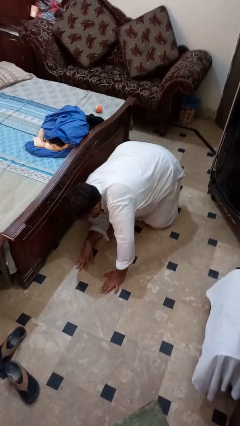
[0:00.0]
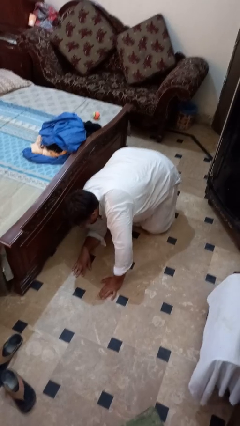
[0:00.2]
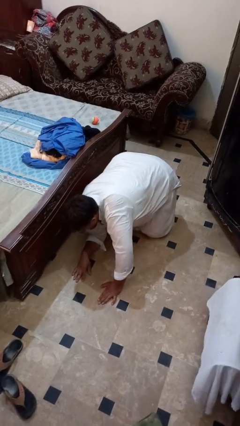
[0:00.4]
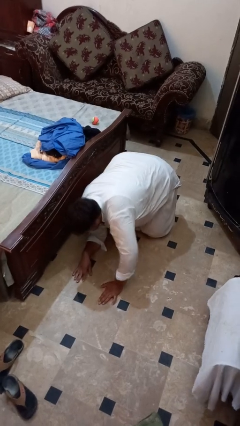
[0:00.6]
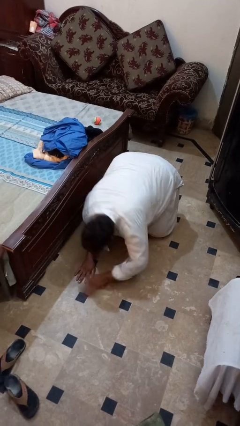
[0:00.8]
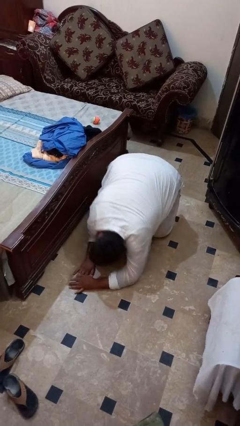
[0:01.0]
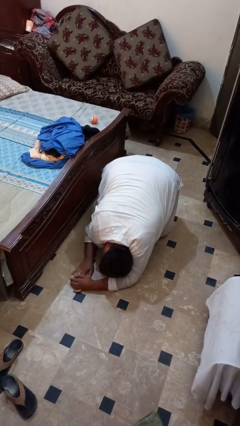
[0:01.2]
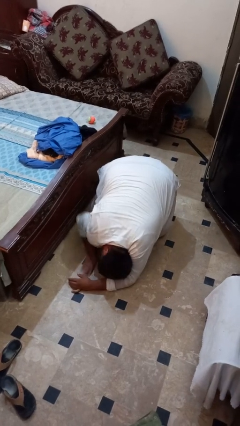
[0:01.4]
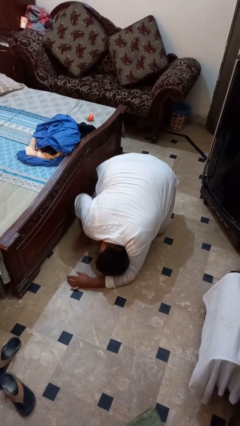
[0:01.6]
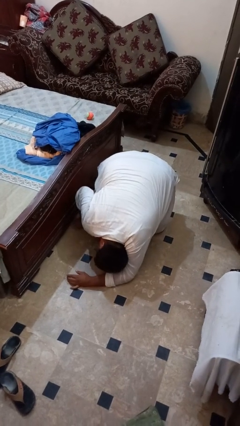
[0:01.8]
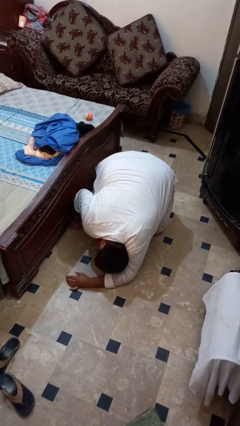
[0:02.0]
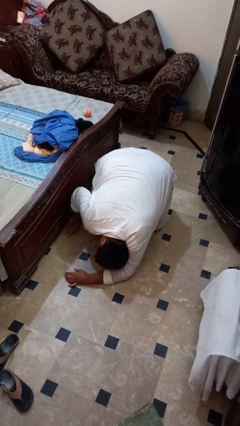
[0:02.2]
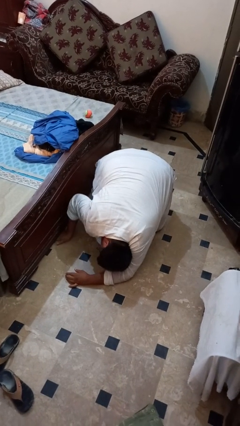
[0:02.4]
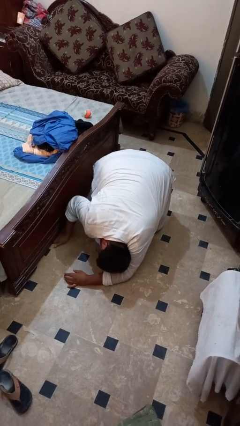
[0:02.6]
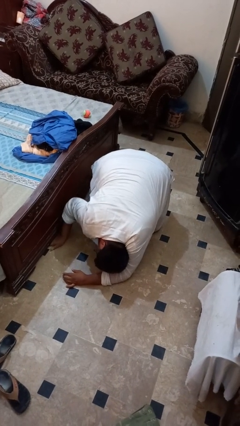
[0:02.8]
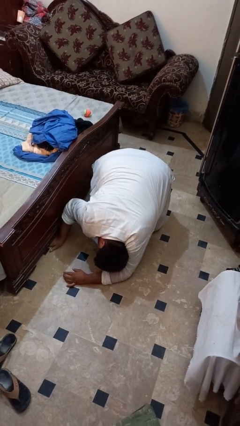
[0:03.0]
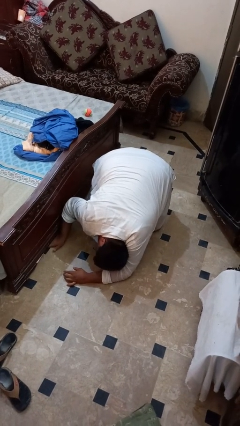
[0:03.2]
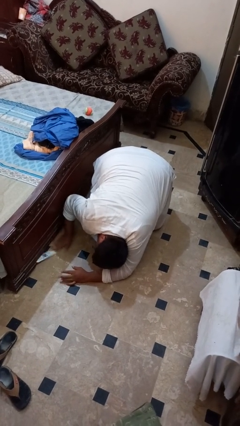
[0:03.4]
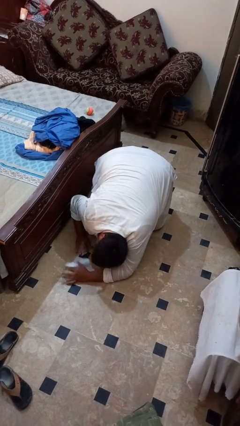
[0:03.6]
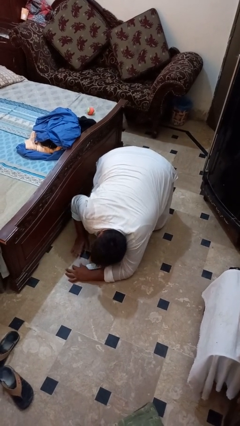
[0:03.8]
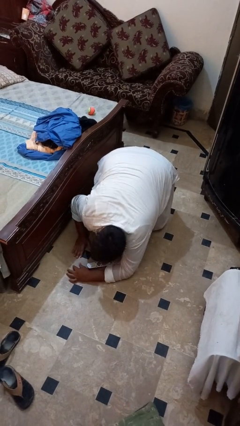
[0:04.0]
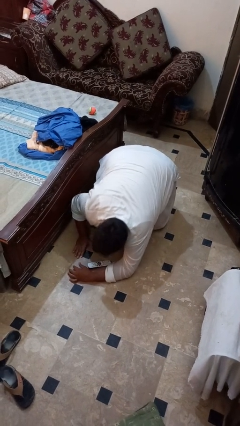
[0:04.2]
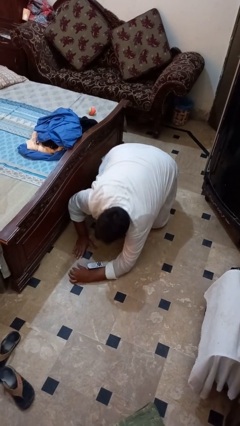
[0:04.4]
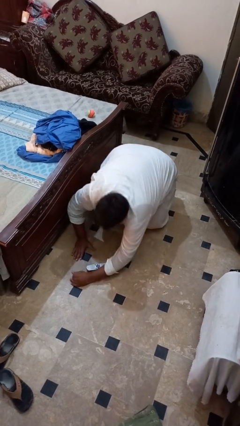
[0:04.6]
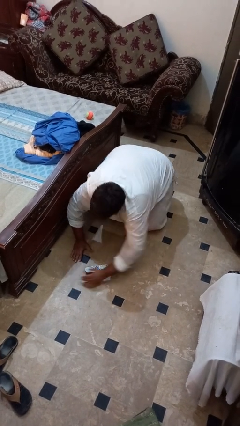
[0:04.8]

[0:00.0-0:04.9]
person searches under bed

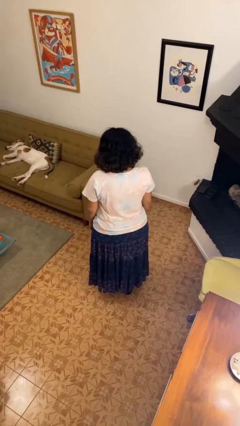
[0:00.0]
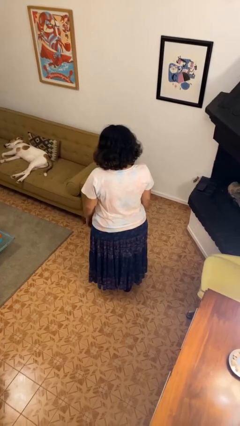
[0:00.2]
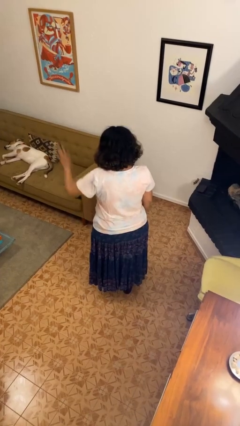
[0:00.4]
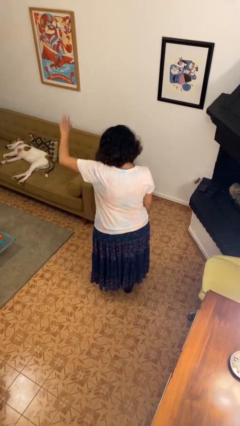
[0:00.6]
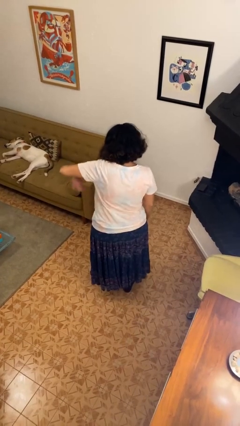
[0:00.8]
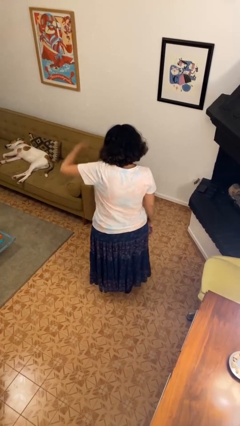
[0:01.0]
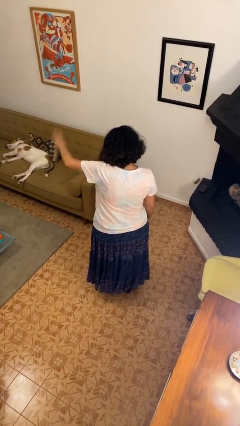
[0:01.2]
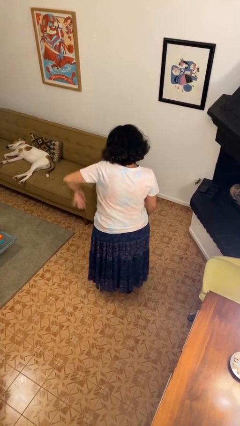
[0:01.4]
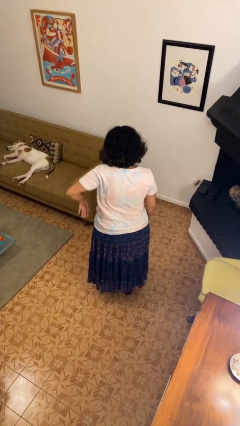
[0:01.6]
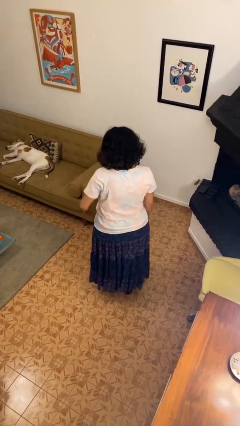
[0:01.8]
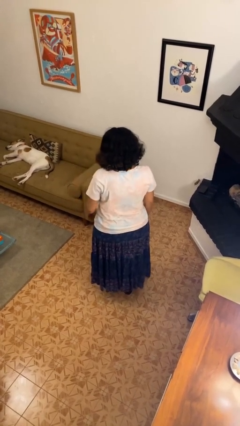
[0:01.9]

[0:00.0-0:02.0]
person gestures come here

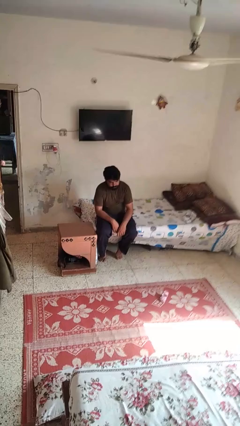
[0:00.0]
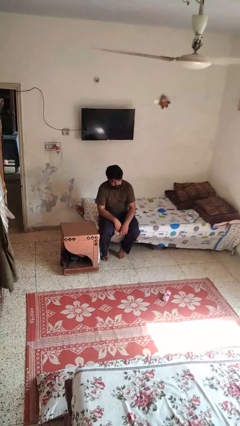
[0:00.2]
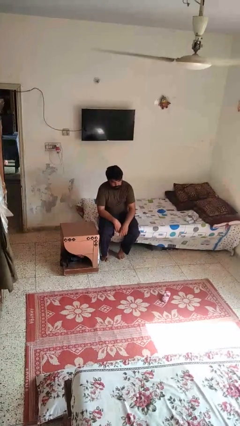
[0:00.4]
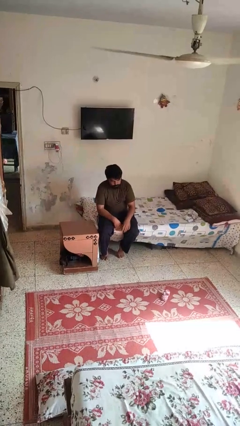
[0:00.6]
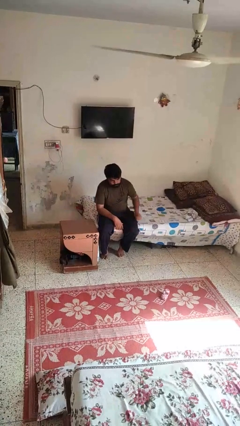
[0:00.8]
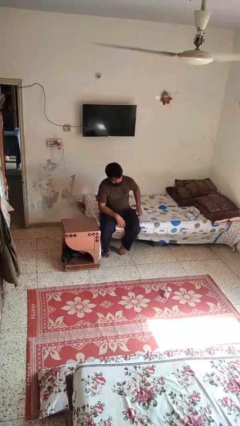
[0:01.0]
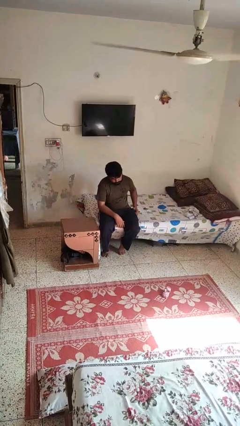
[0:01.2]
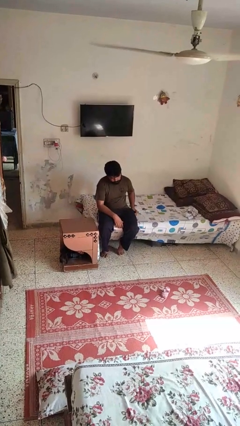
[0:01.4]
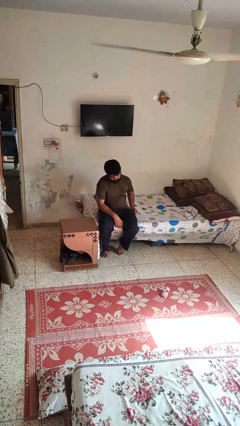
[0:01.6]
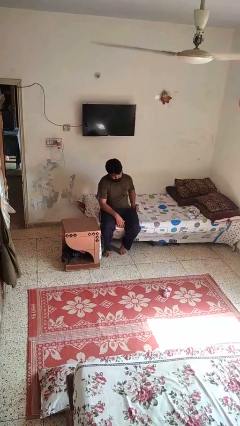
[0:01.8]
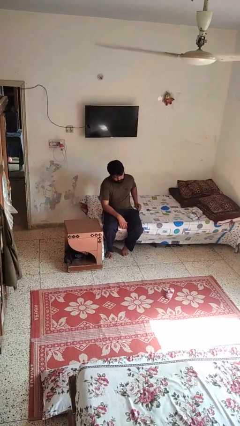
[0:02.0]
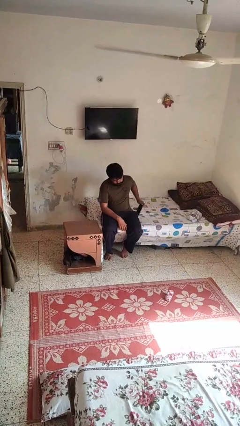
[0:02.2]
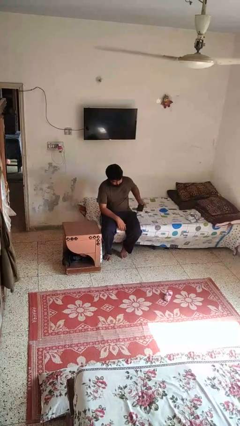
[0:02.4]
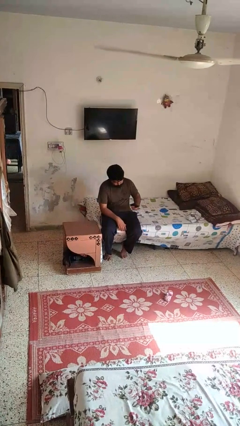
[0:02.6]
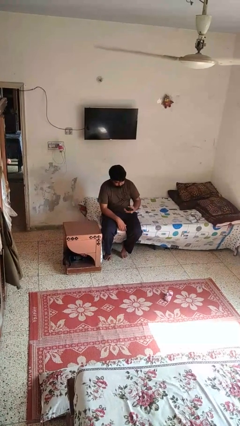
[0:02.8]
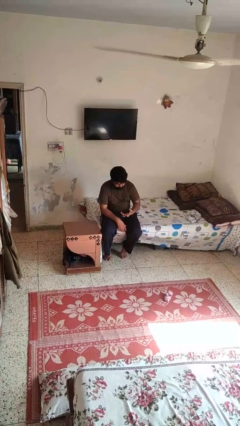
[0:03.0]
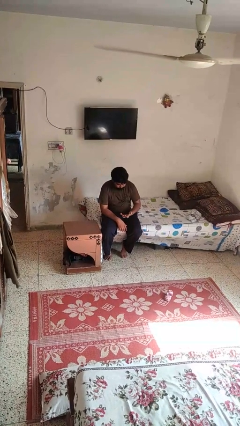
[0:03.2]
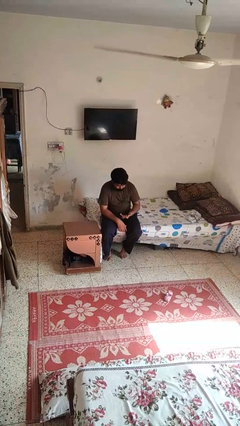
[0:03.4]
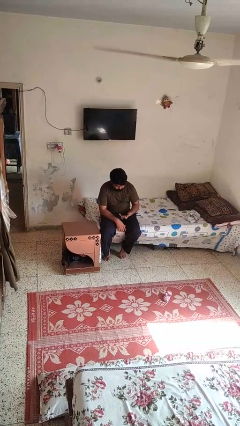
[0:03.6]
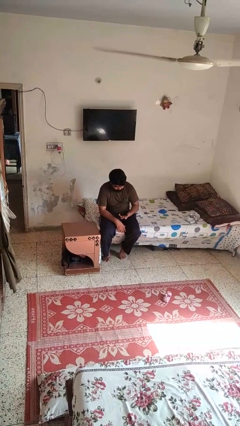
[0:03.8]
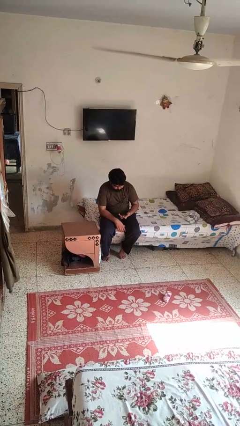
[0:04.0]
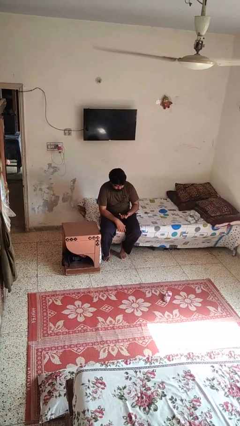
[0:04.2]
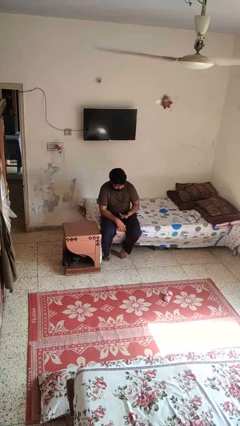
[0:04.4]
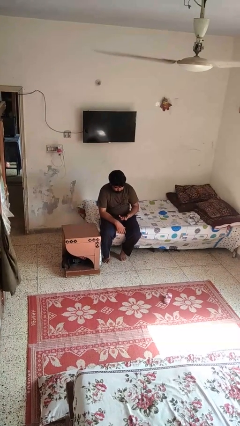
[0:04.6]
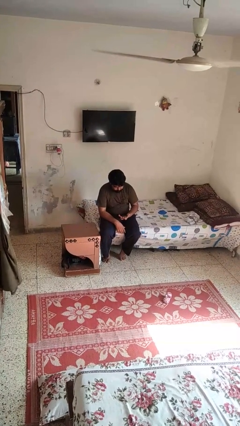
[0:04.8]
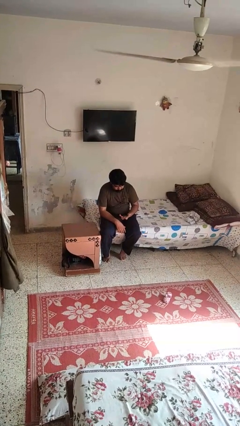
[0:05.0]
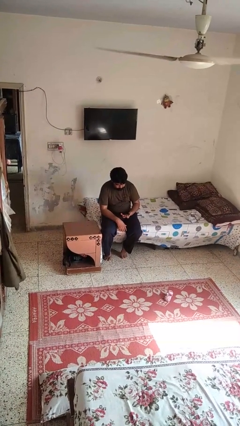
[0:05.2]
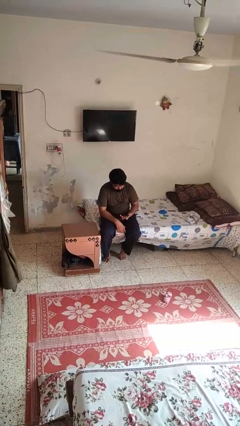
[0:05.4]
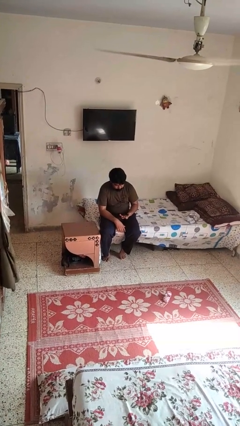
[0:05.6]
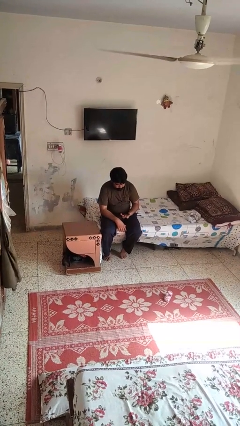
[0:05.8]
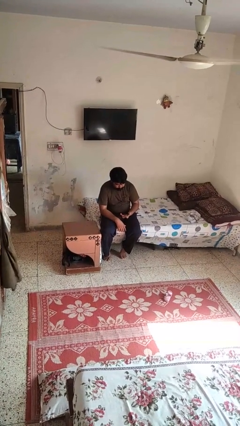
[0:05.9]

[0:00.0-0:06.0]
person takes phone from pocket

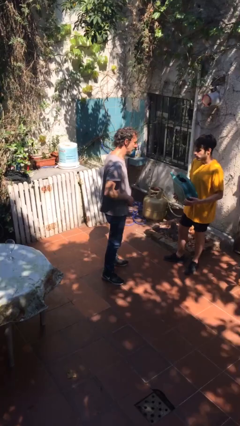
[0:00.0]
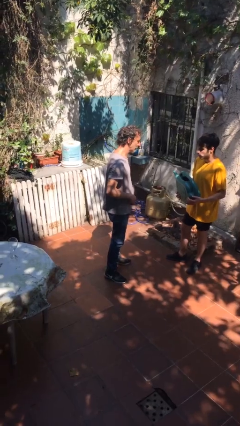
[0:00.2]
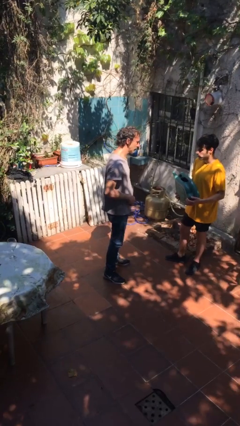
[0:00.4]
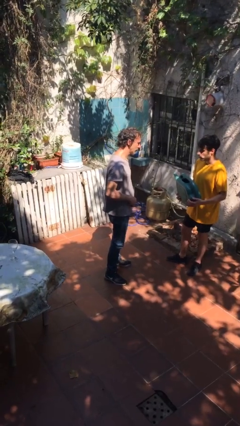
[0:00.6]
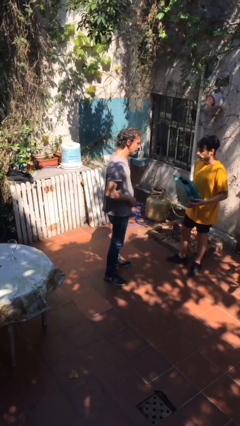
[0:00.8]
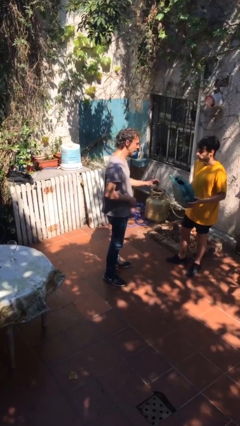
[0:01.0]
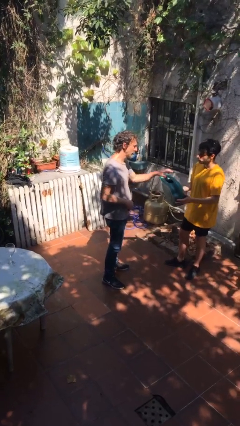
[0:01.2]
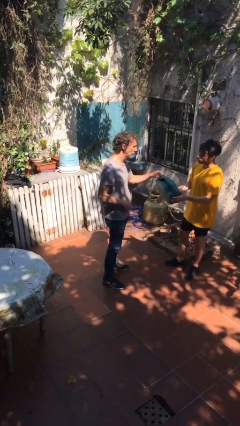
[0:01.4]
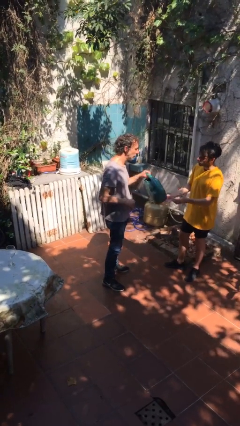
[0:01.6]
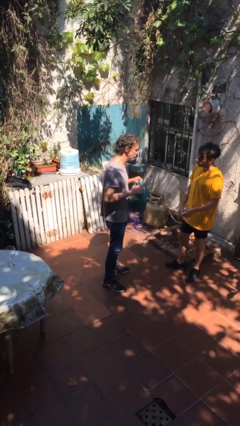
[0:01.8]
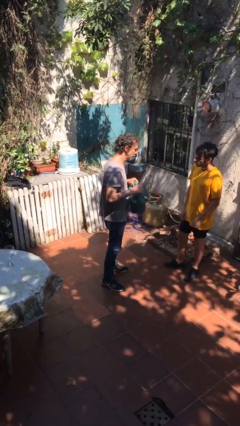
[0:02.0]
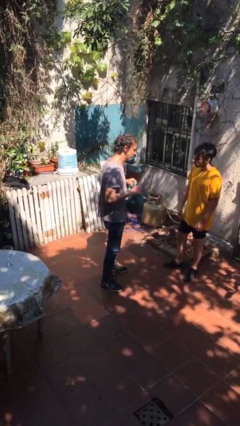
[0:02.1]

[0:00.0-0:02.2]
person transfers object to person

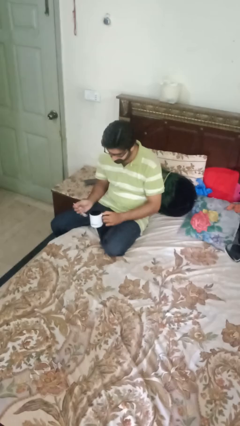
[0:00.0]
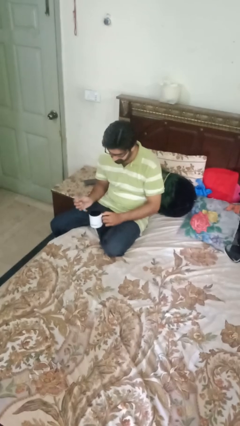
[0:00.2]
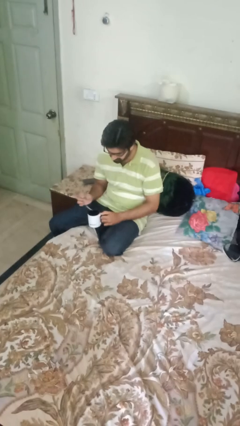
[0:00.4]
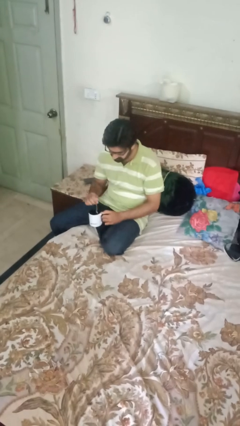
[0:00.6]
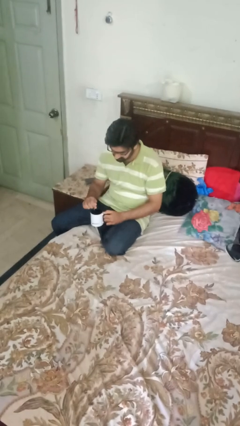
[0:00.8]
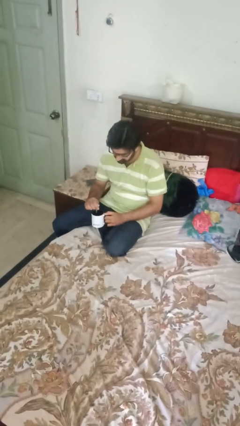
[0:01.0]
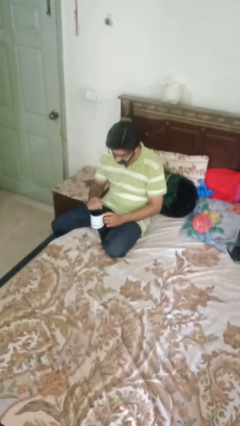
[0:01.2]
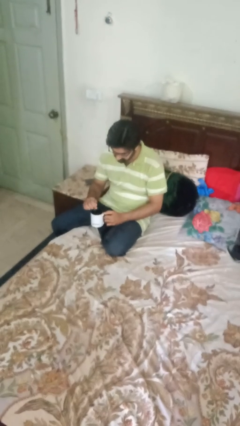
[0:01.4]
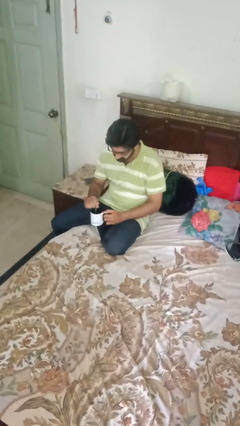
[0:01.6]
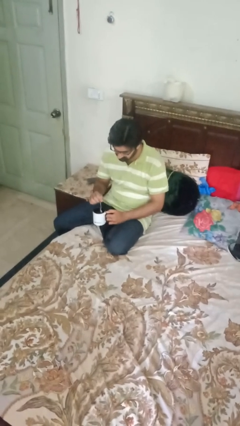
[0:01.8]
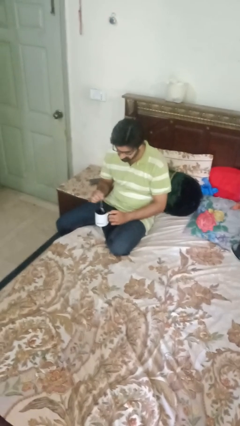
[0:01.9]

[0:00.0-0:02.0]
person stirs mug

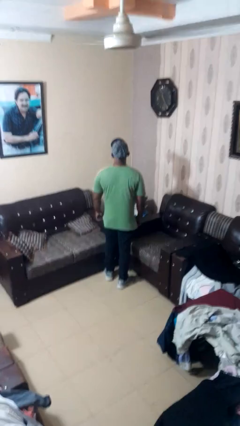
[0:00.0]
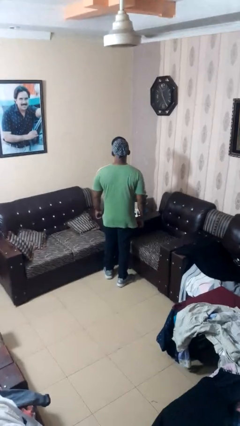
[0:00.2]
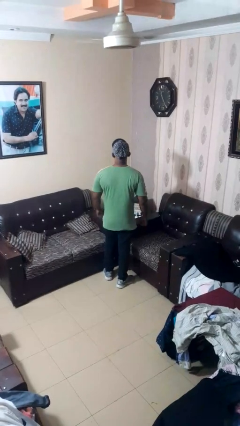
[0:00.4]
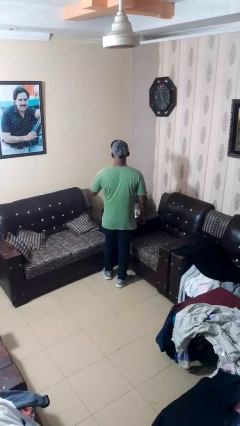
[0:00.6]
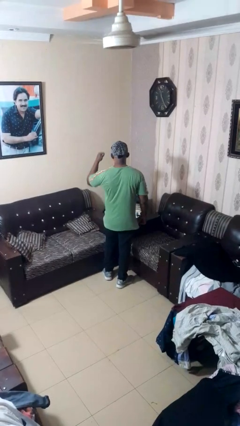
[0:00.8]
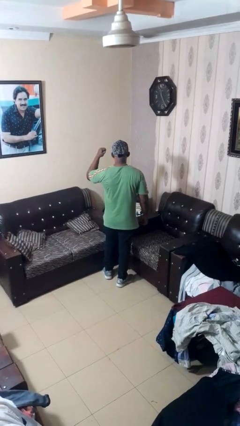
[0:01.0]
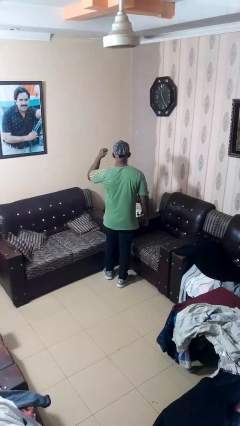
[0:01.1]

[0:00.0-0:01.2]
person gestures behind me
